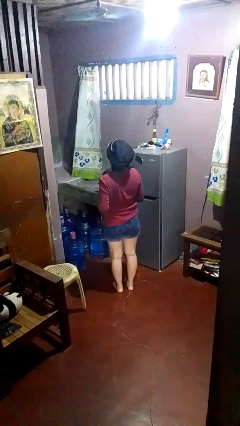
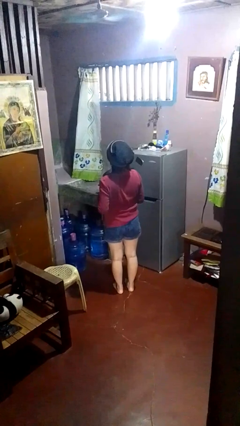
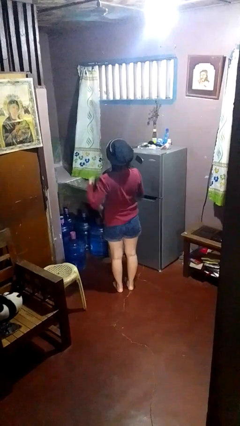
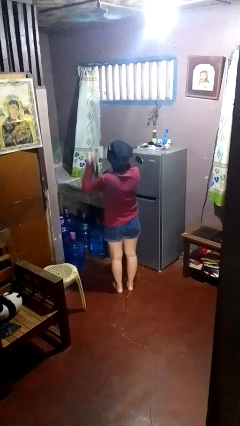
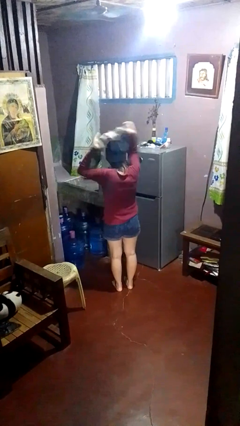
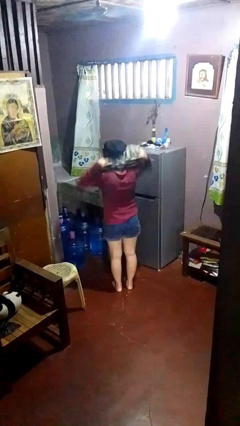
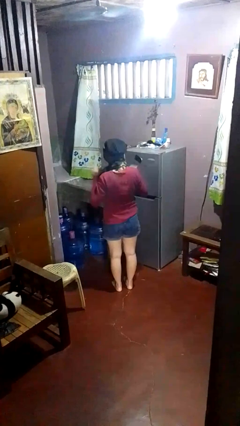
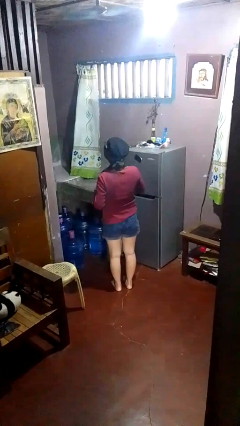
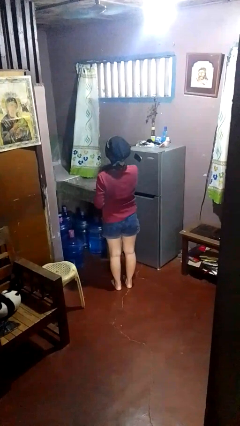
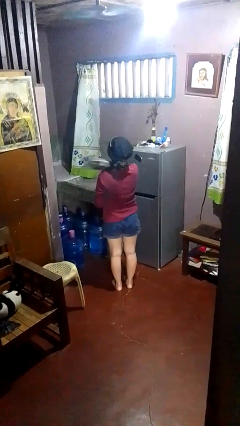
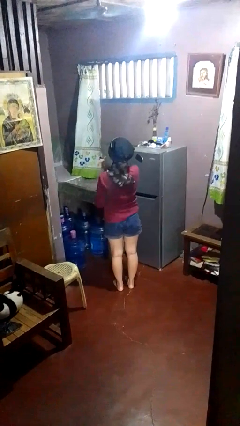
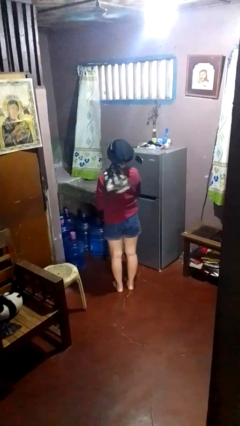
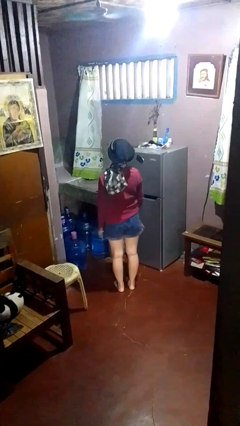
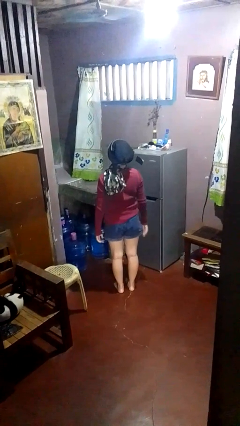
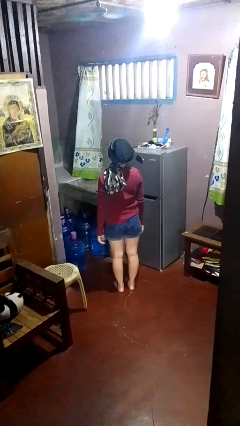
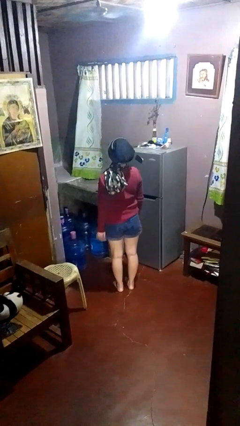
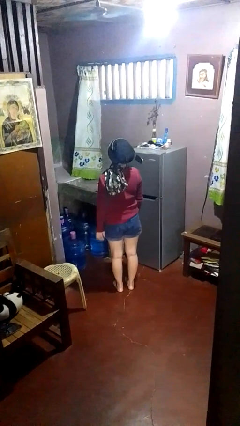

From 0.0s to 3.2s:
person puts on scarf

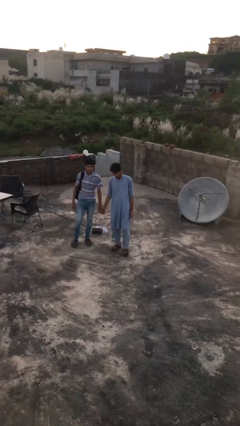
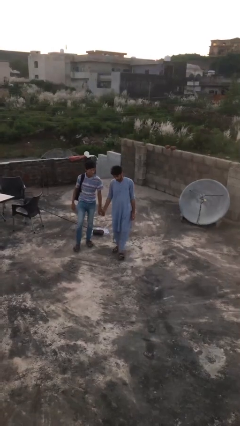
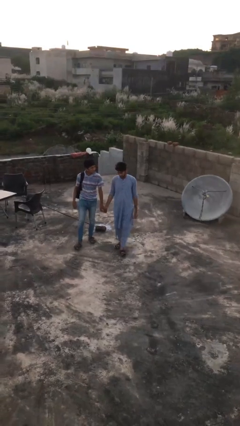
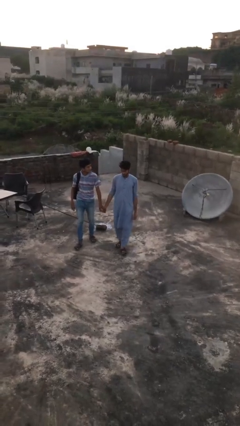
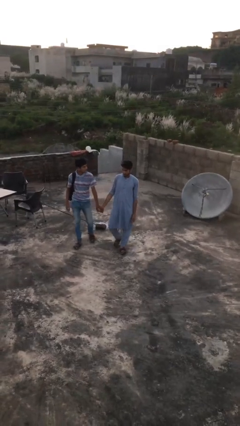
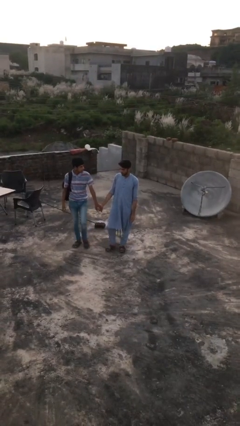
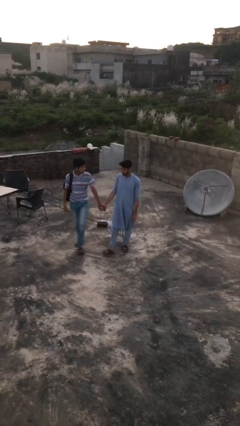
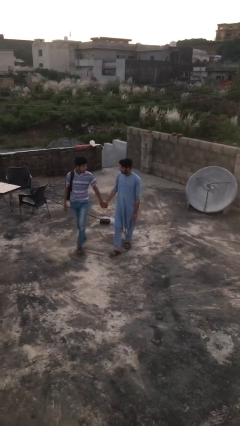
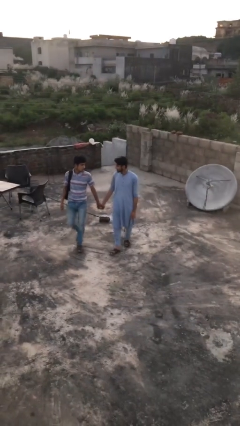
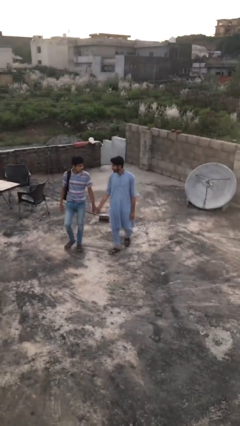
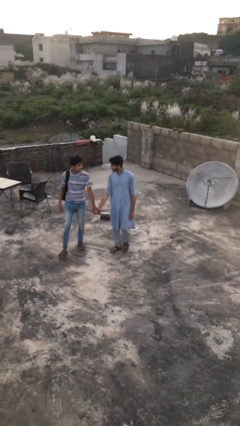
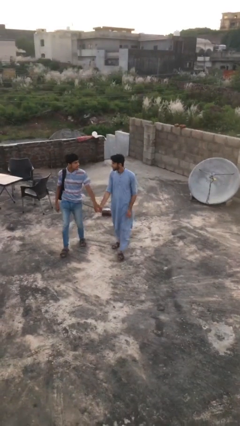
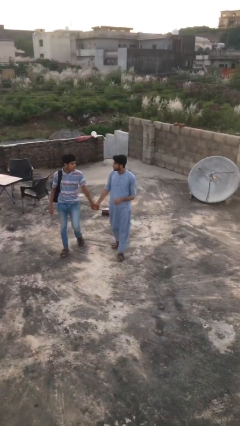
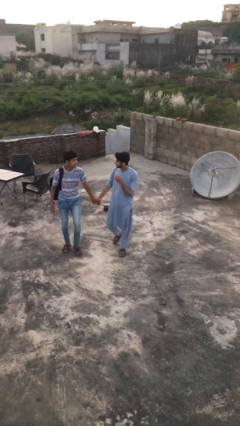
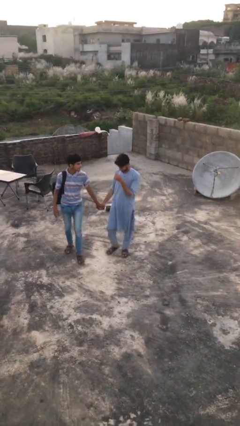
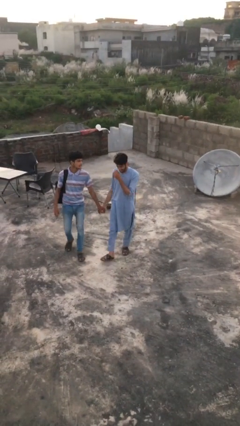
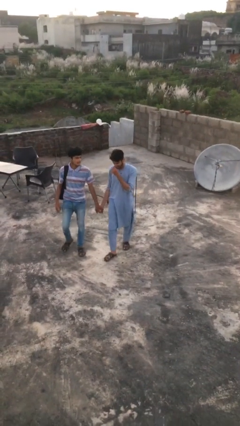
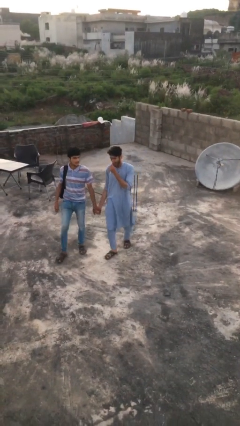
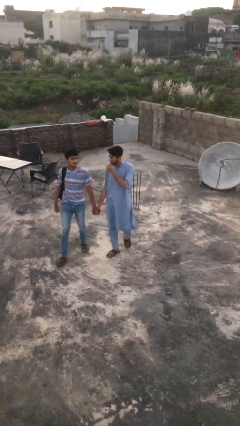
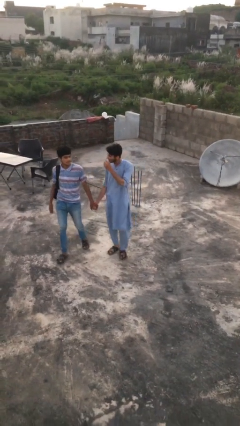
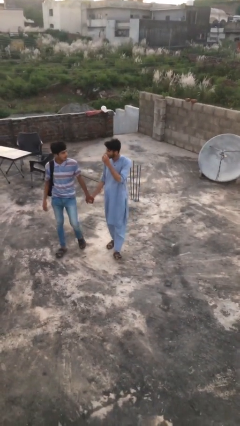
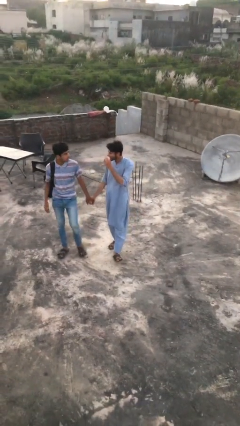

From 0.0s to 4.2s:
person holds hand

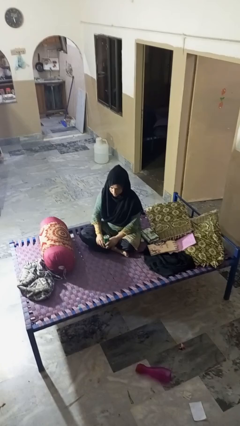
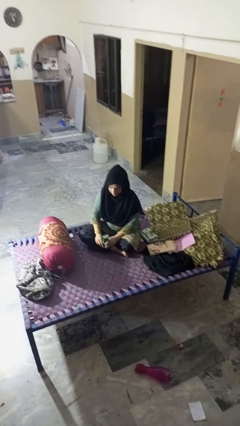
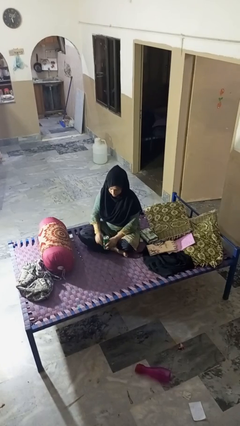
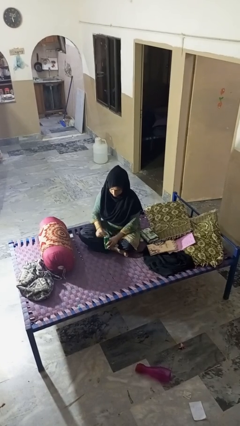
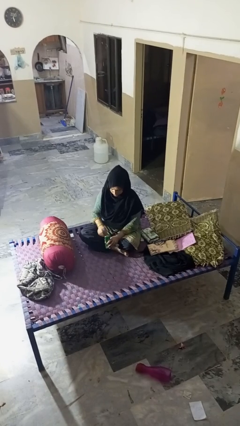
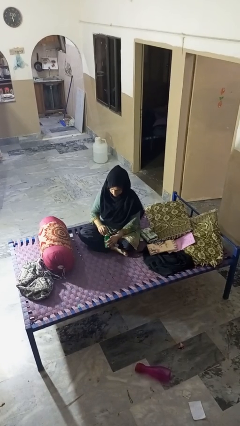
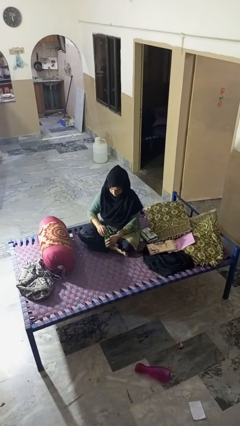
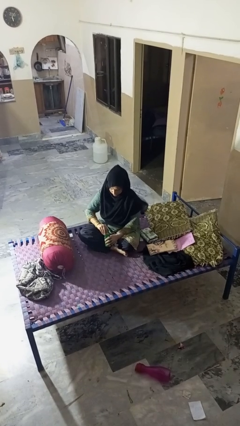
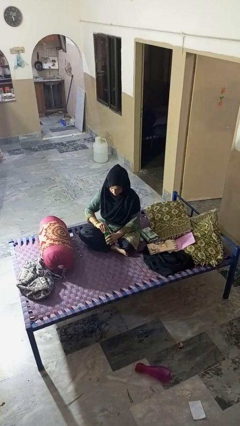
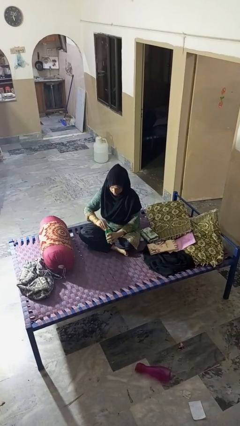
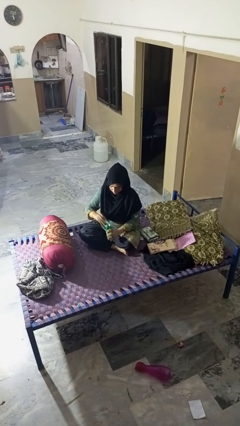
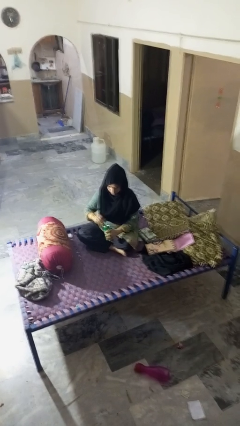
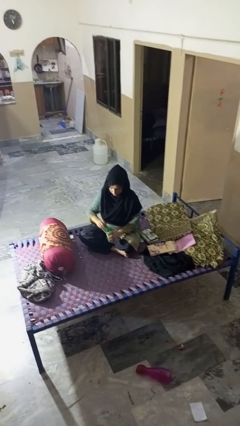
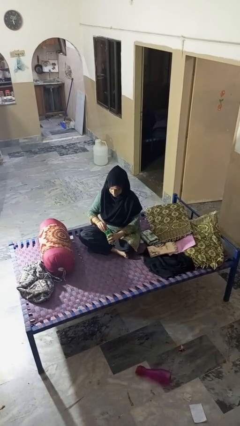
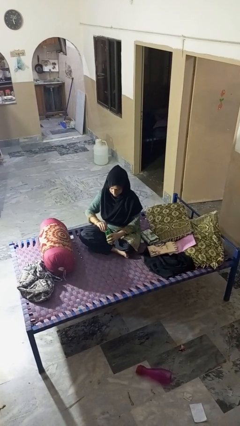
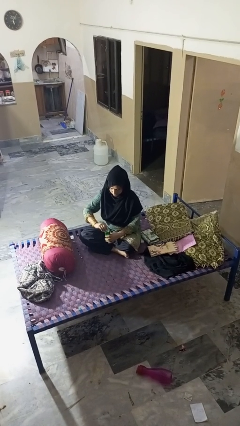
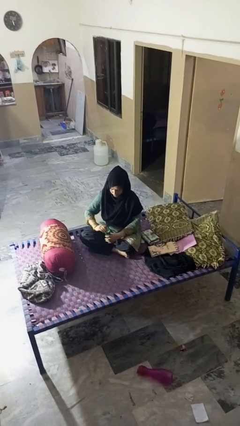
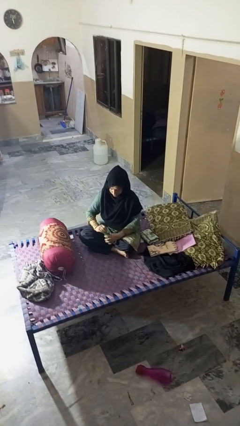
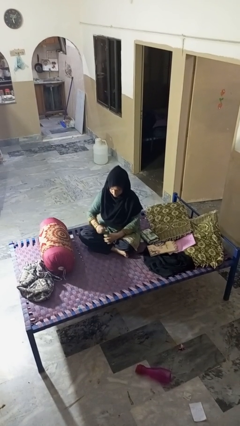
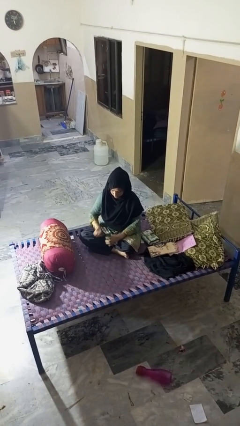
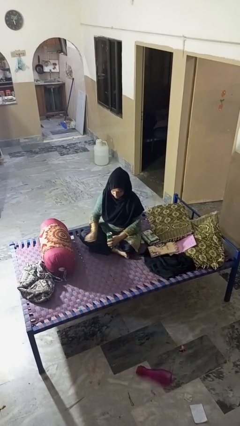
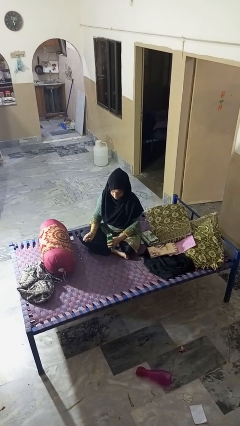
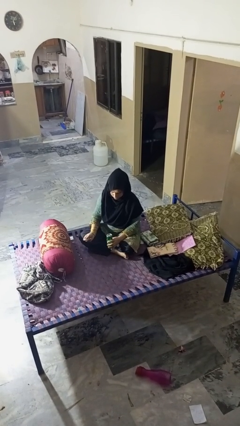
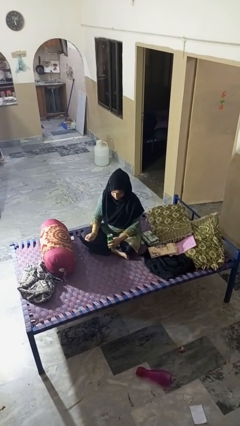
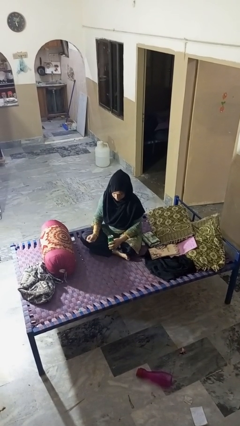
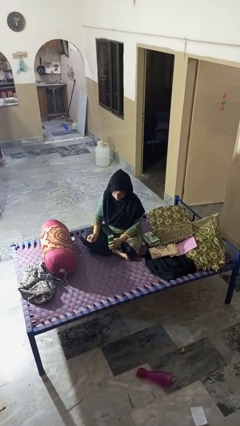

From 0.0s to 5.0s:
person opens can with can opener

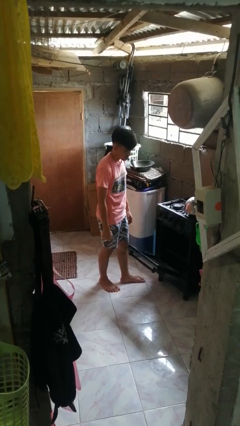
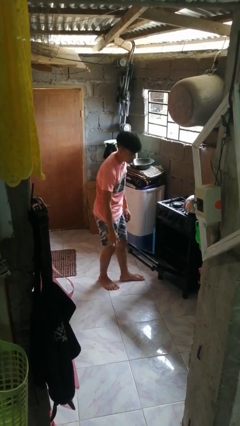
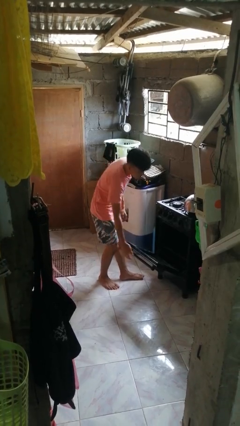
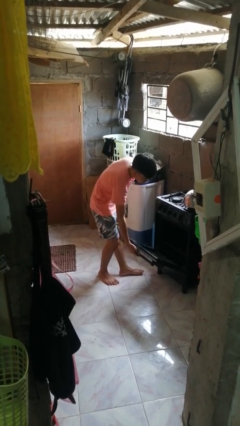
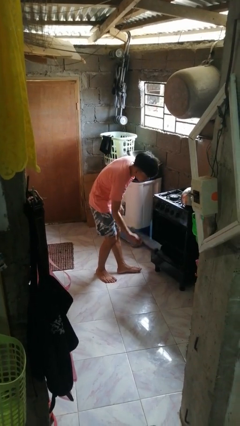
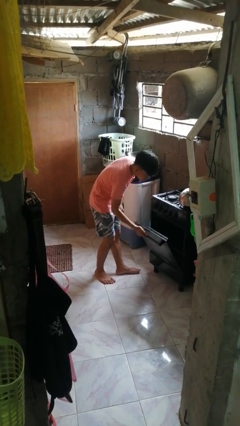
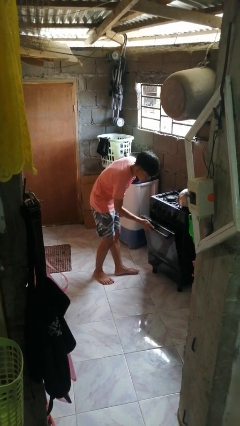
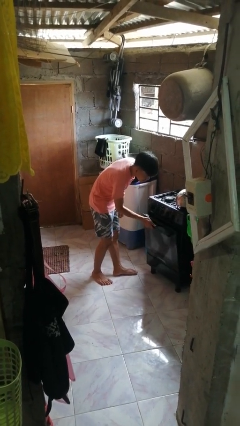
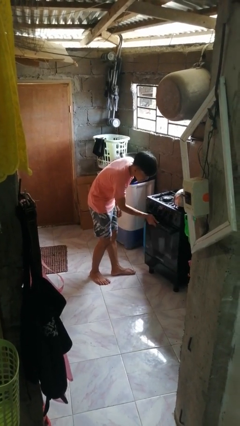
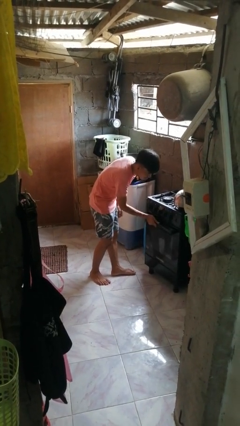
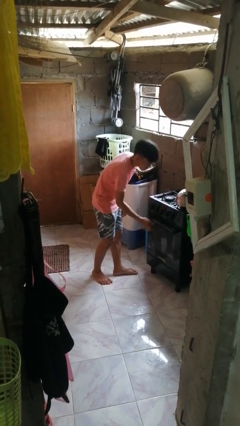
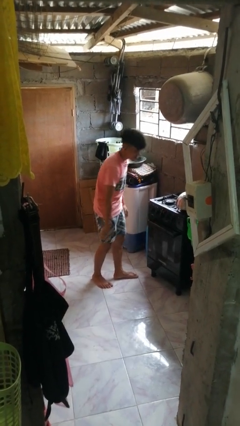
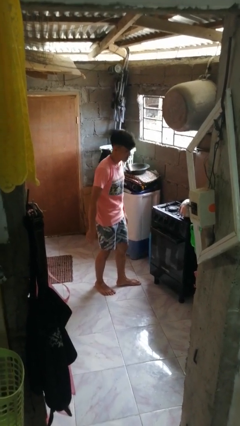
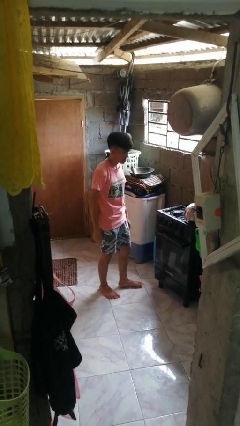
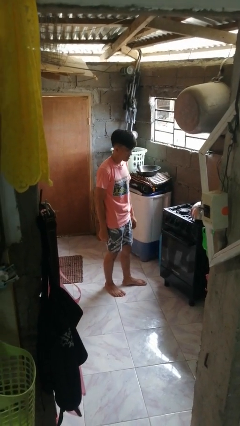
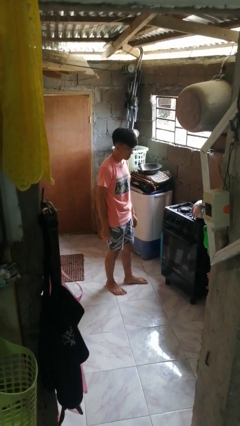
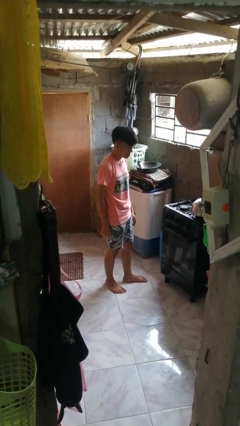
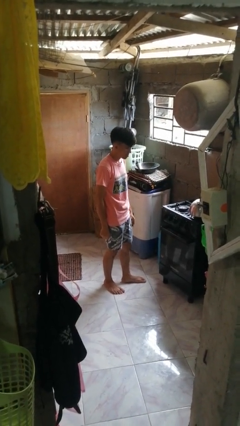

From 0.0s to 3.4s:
person closes oven door

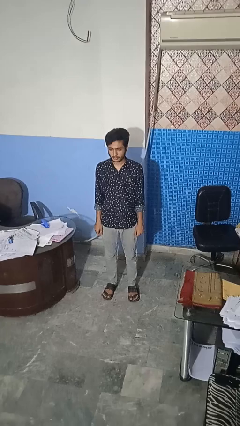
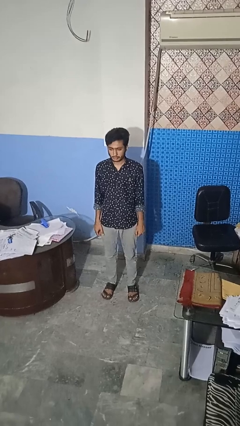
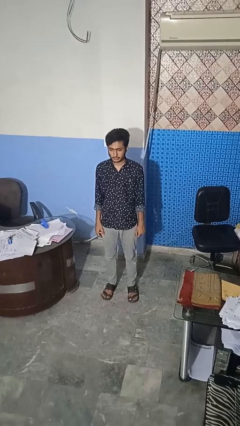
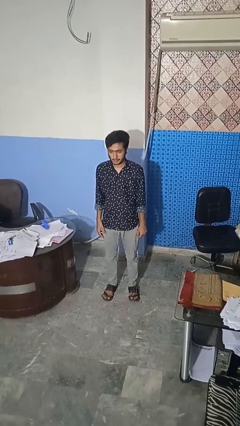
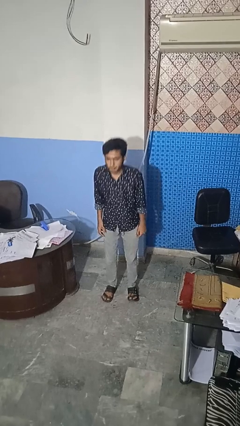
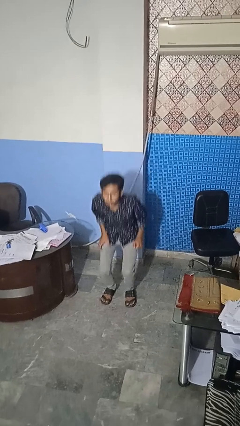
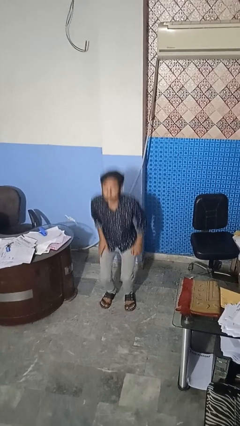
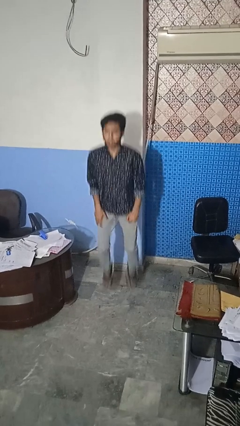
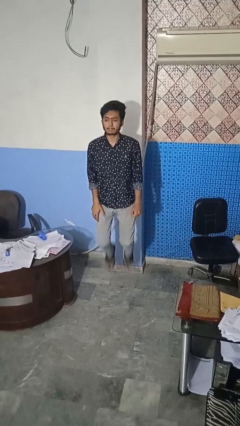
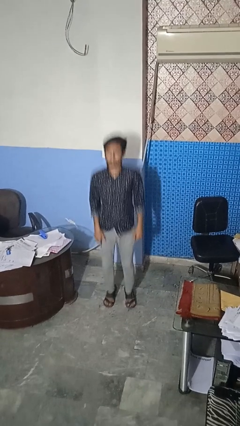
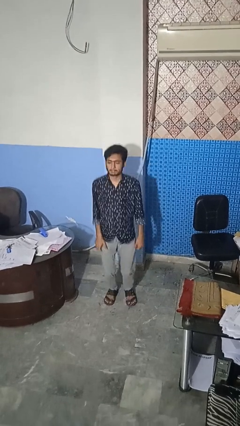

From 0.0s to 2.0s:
person jumps
